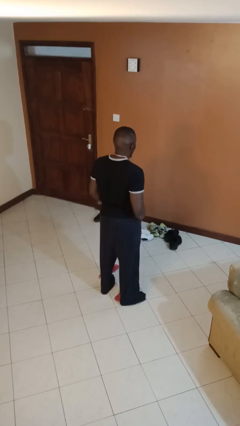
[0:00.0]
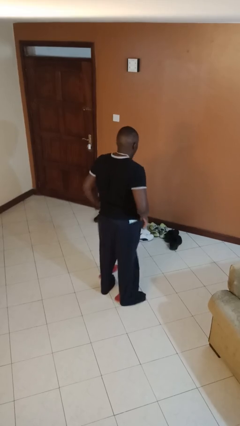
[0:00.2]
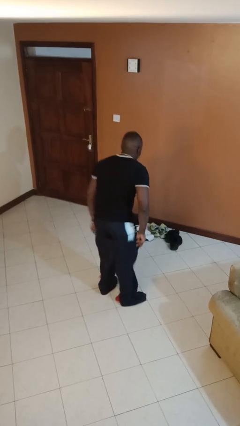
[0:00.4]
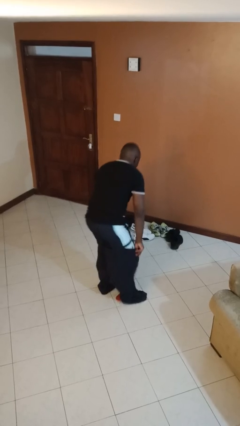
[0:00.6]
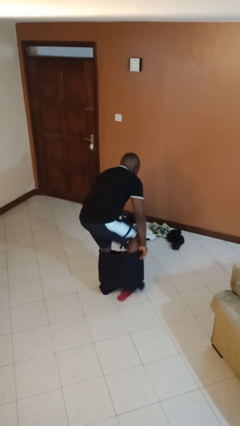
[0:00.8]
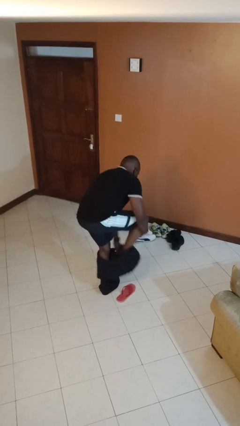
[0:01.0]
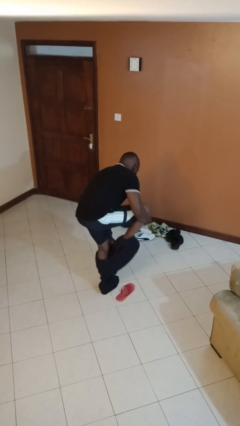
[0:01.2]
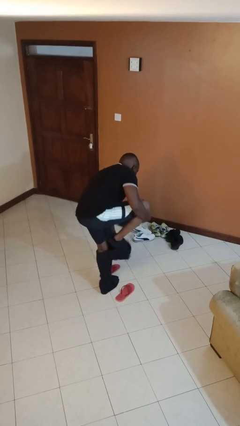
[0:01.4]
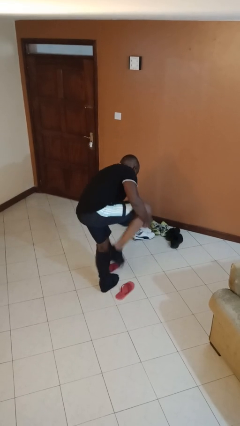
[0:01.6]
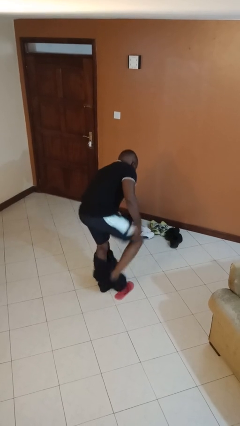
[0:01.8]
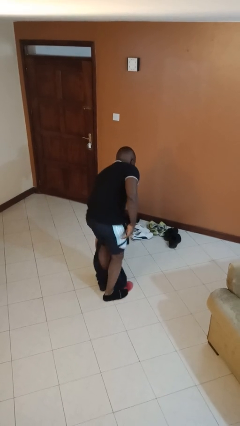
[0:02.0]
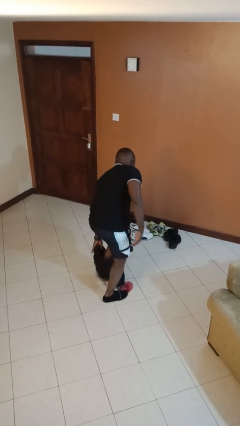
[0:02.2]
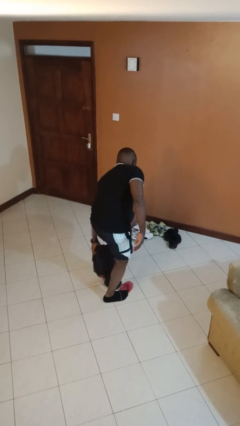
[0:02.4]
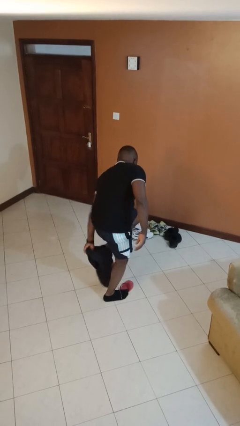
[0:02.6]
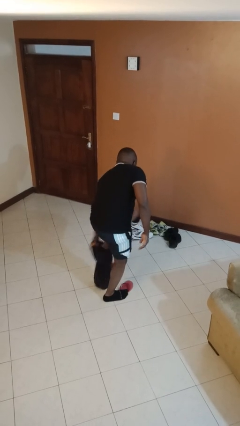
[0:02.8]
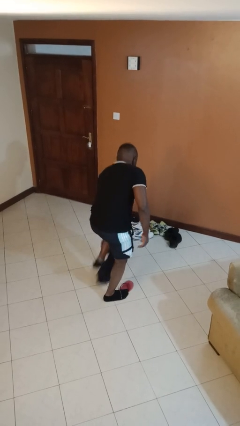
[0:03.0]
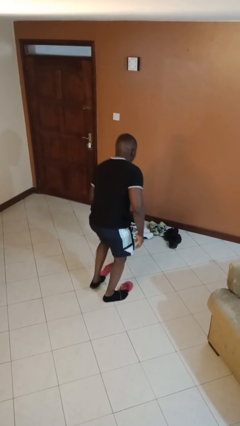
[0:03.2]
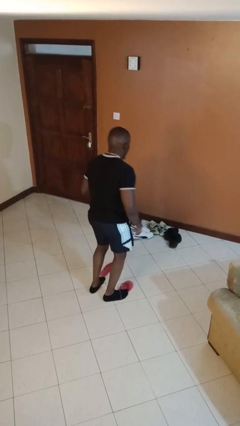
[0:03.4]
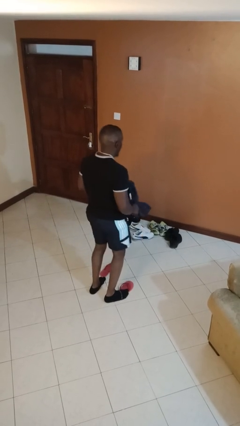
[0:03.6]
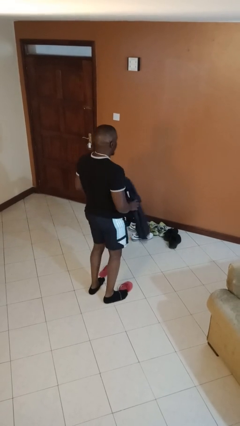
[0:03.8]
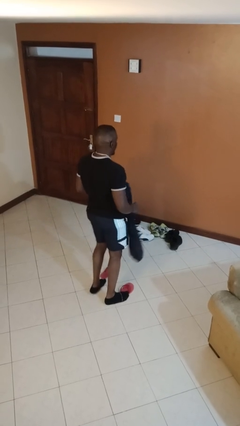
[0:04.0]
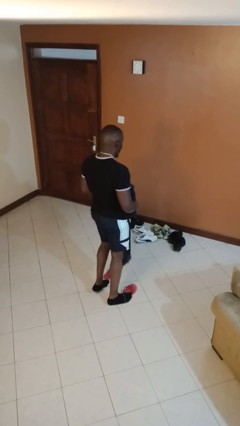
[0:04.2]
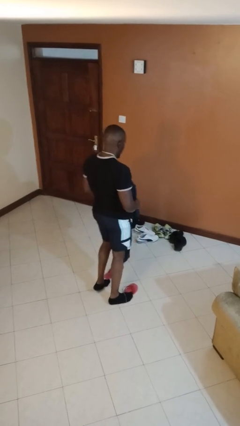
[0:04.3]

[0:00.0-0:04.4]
person takes off pants

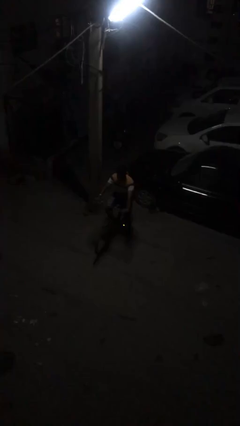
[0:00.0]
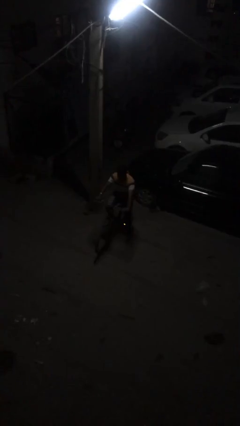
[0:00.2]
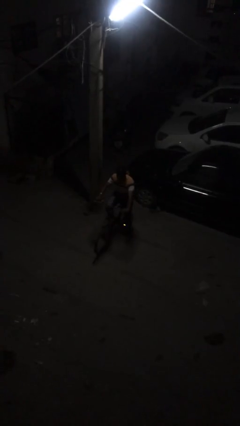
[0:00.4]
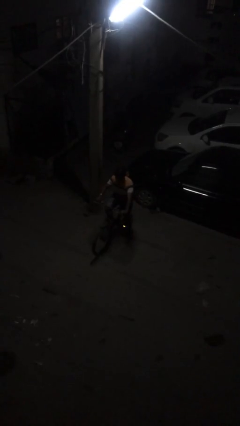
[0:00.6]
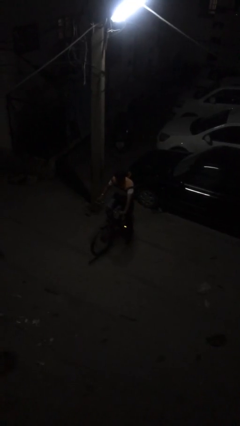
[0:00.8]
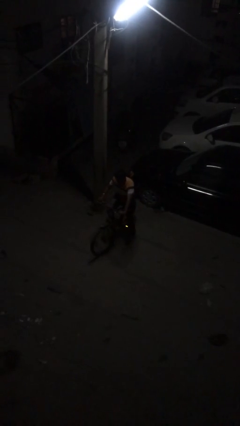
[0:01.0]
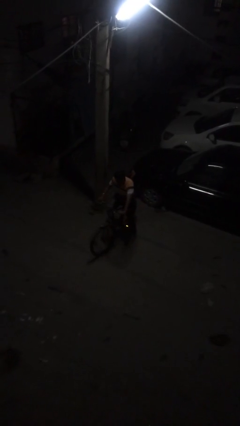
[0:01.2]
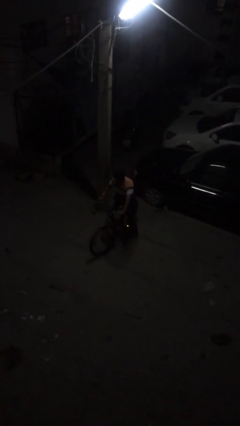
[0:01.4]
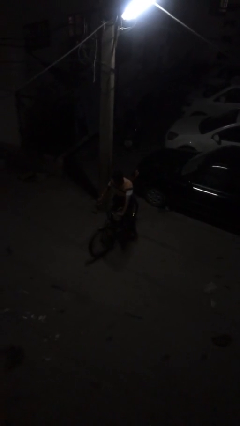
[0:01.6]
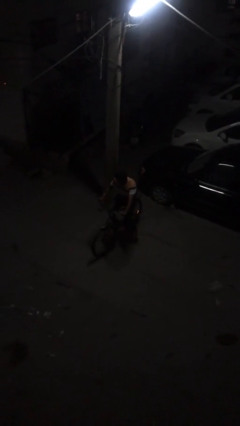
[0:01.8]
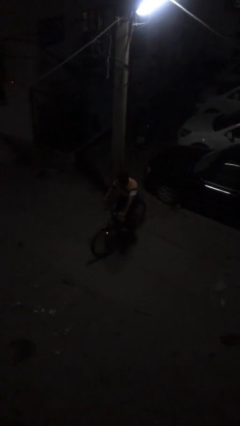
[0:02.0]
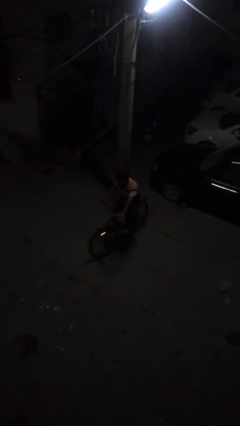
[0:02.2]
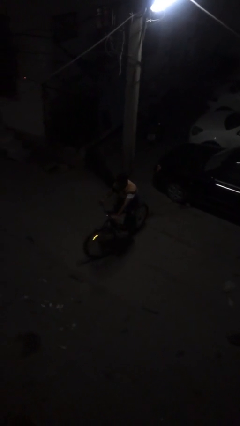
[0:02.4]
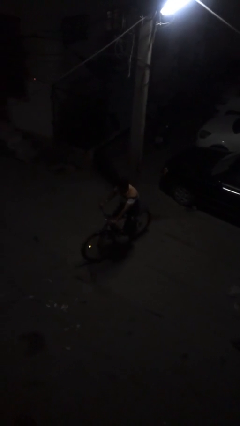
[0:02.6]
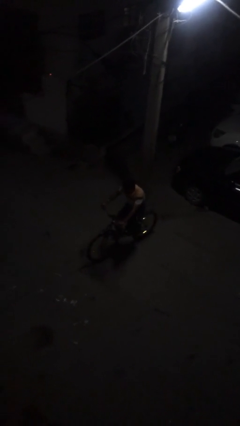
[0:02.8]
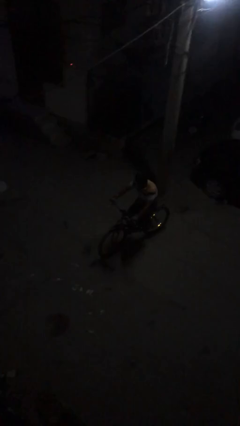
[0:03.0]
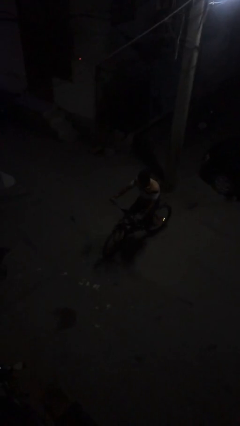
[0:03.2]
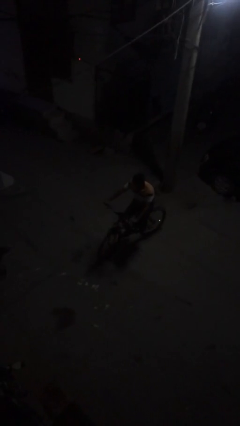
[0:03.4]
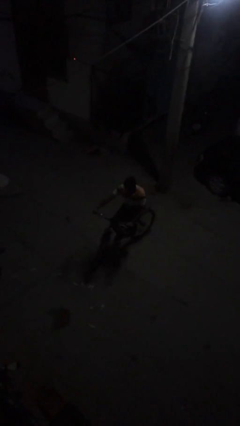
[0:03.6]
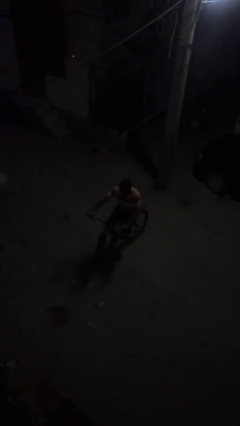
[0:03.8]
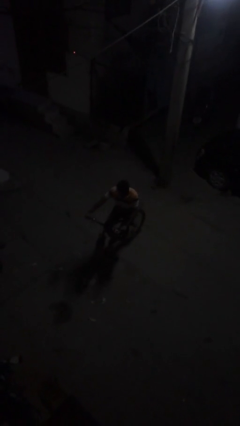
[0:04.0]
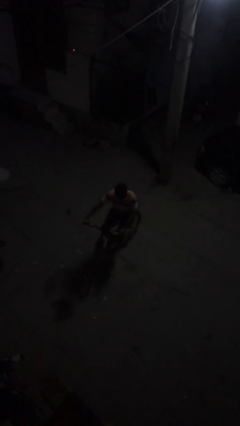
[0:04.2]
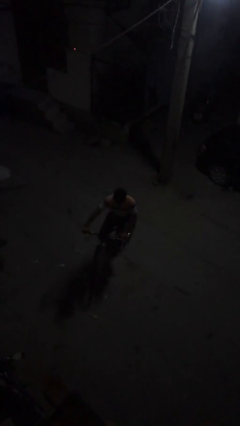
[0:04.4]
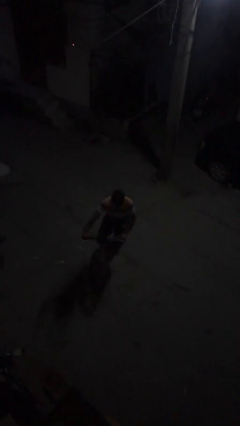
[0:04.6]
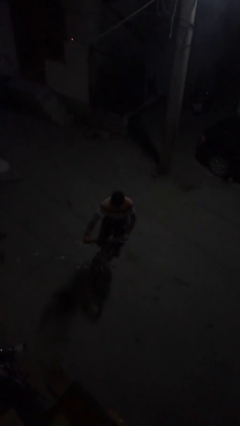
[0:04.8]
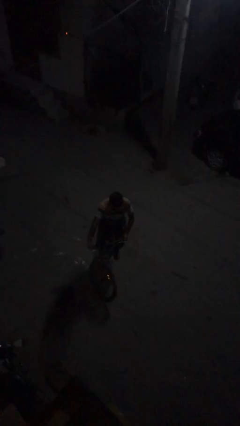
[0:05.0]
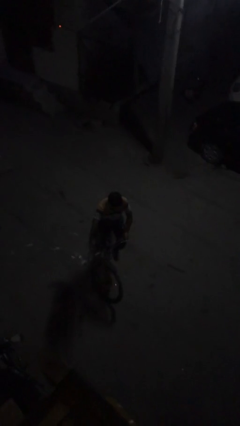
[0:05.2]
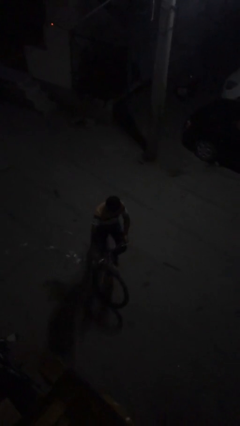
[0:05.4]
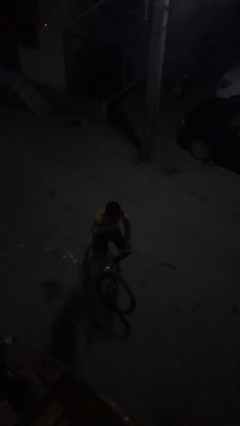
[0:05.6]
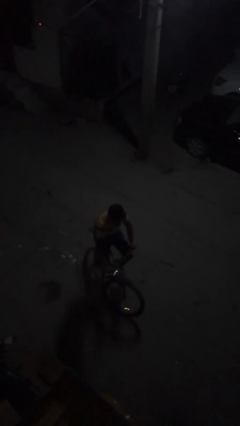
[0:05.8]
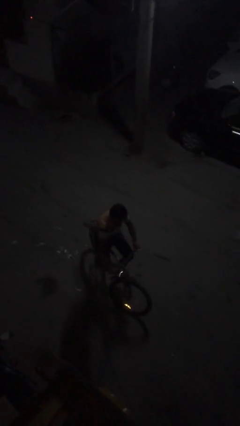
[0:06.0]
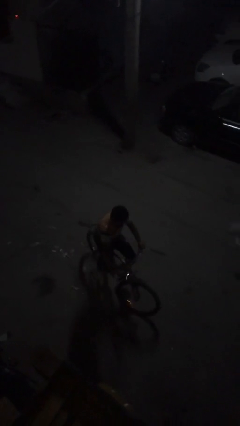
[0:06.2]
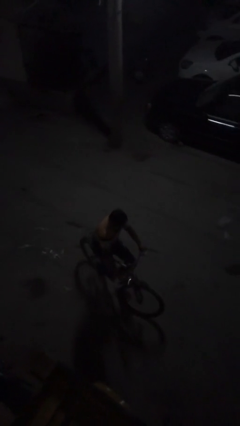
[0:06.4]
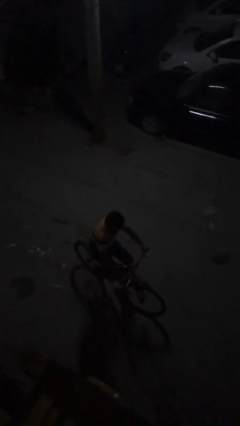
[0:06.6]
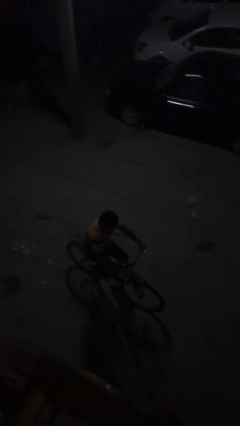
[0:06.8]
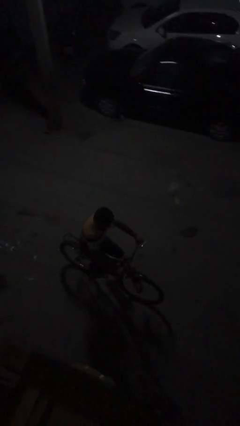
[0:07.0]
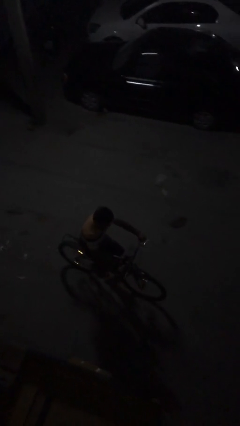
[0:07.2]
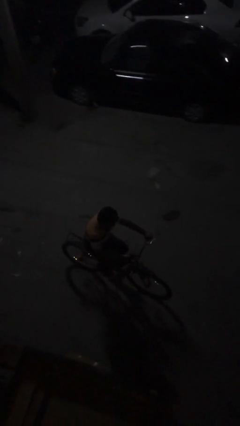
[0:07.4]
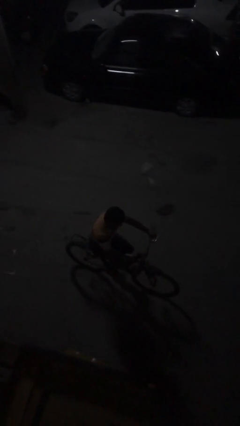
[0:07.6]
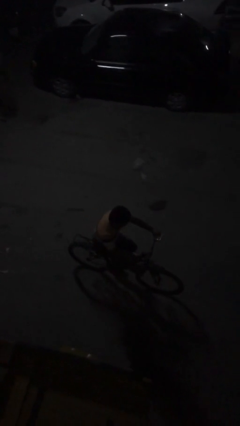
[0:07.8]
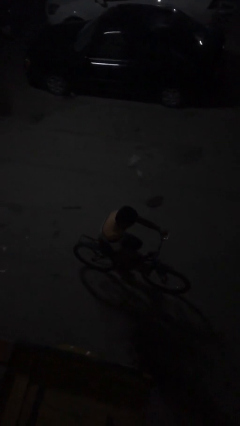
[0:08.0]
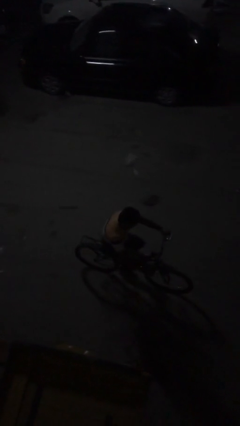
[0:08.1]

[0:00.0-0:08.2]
person rides bicycle

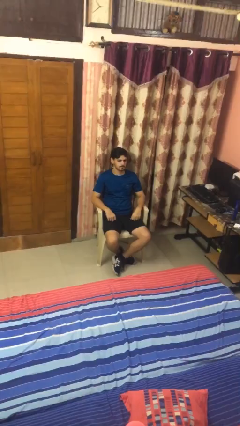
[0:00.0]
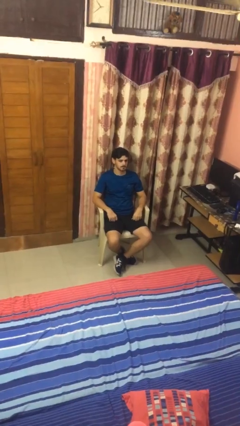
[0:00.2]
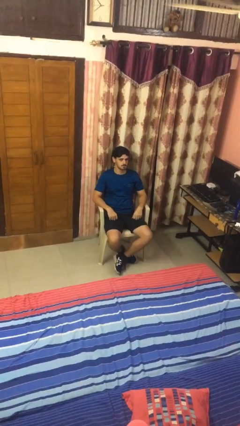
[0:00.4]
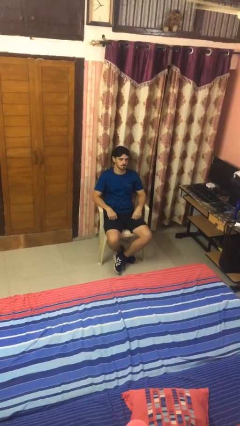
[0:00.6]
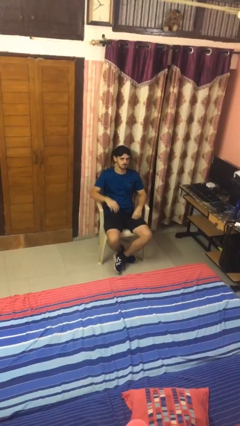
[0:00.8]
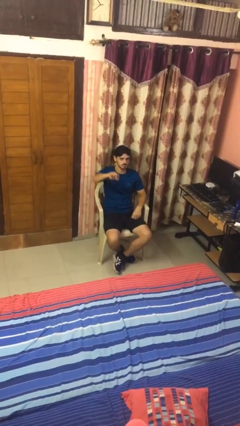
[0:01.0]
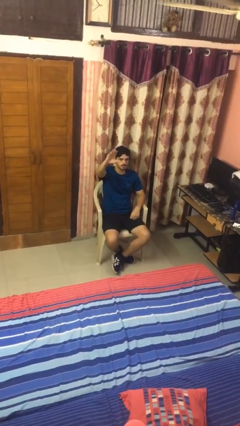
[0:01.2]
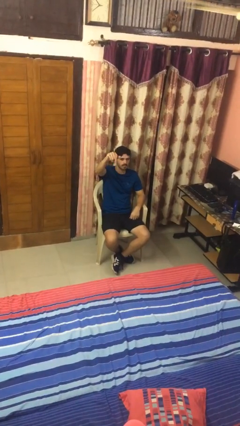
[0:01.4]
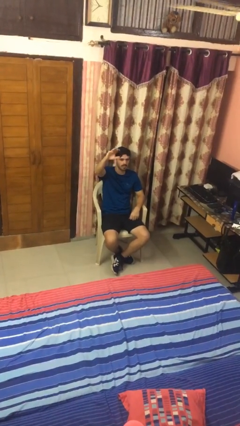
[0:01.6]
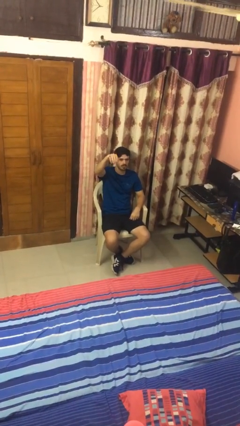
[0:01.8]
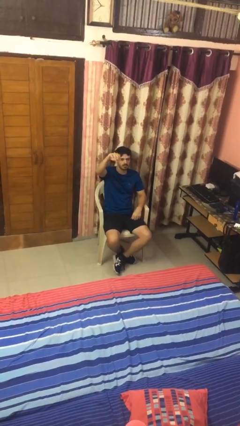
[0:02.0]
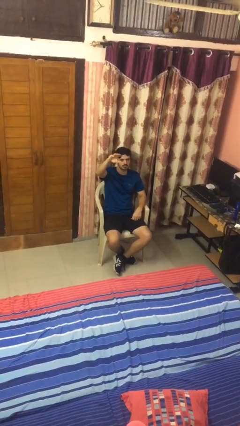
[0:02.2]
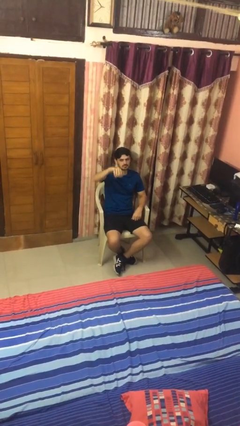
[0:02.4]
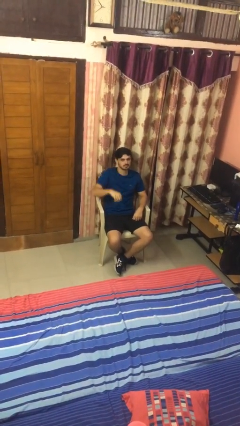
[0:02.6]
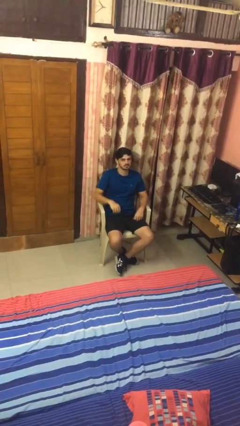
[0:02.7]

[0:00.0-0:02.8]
person gestures come here

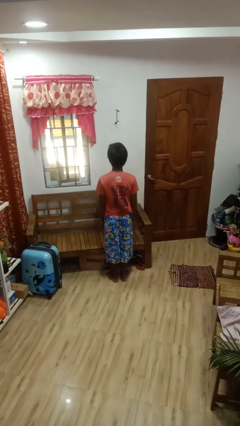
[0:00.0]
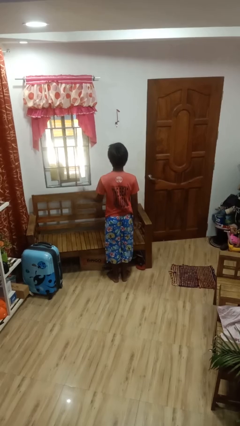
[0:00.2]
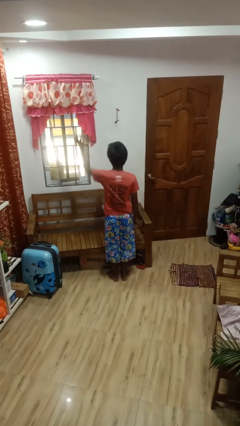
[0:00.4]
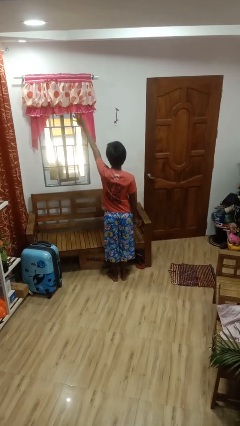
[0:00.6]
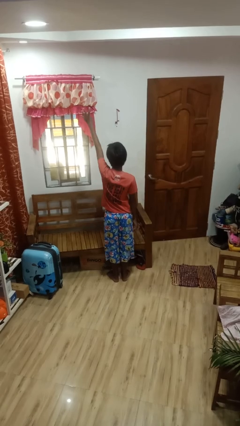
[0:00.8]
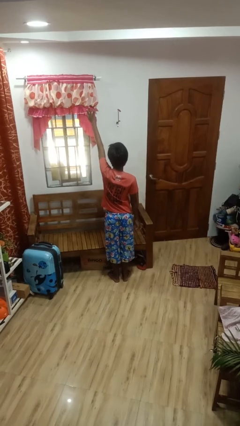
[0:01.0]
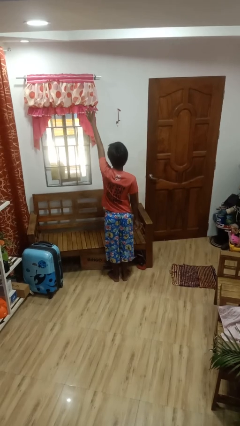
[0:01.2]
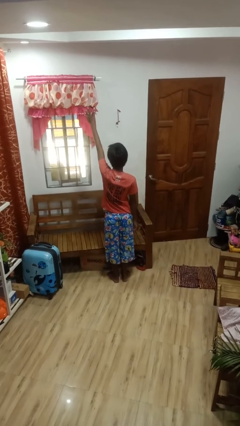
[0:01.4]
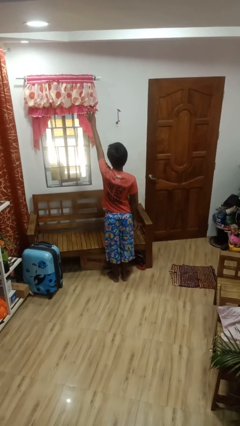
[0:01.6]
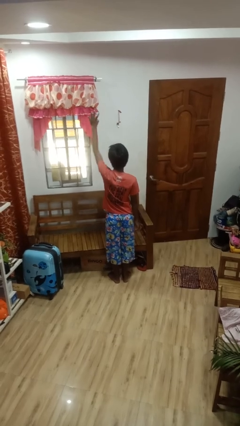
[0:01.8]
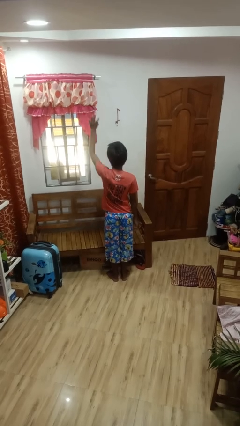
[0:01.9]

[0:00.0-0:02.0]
person gestures number four
